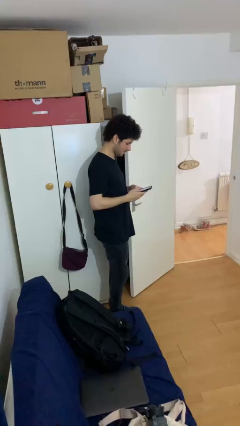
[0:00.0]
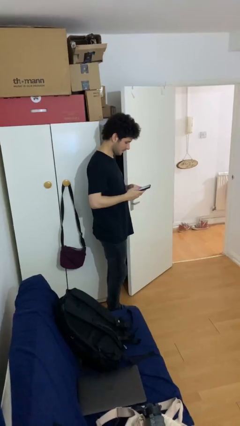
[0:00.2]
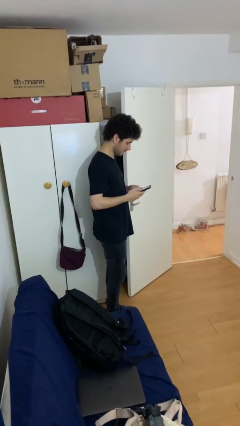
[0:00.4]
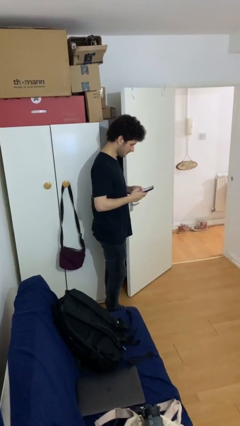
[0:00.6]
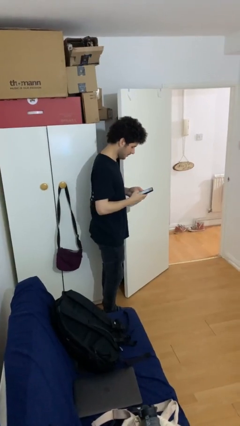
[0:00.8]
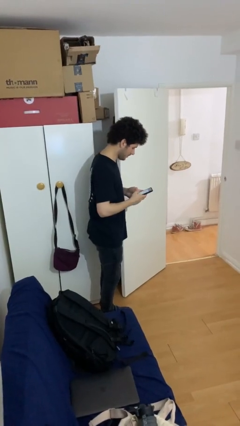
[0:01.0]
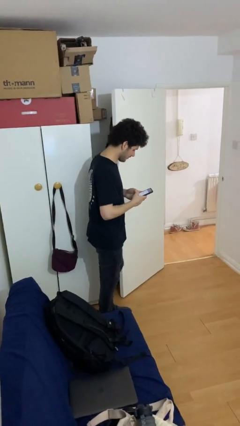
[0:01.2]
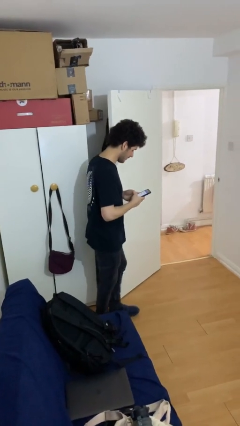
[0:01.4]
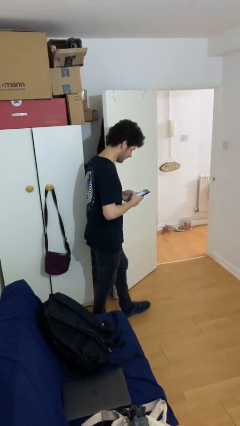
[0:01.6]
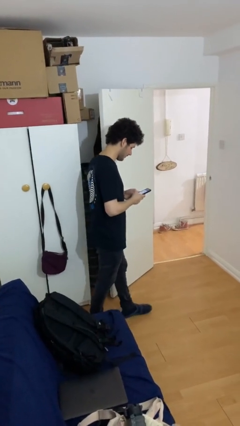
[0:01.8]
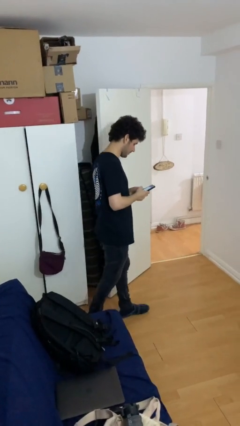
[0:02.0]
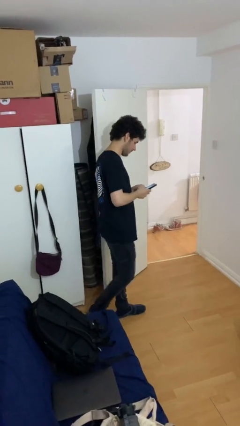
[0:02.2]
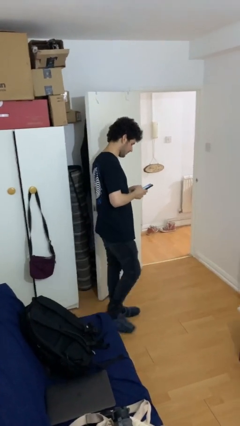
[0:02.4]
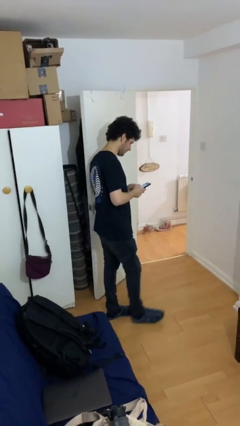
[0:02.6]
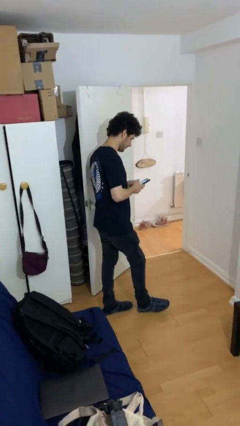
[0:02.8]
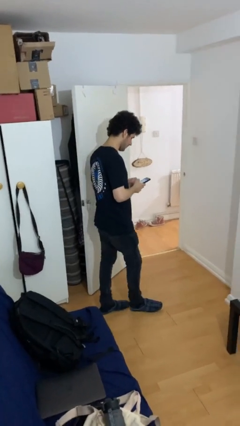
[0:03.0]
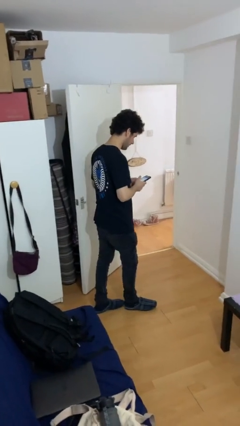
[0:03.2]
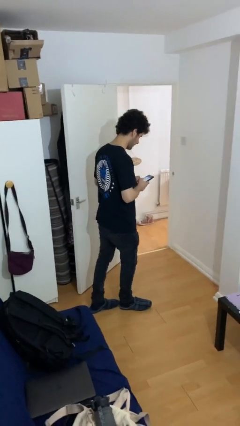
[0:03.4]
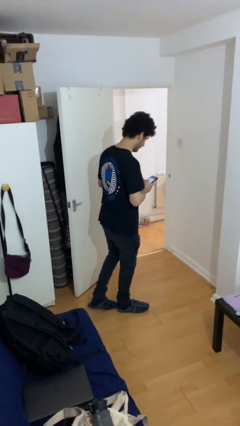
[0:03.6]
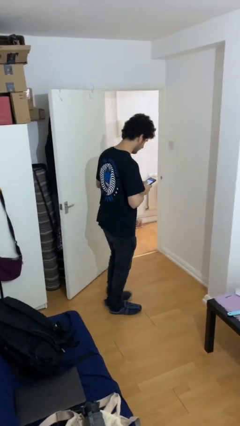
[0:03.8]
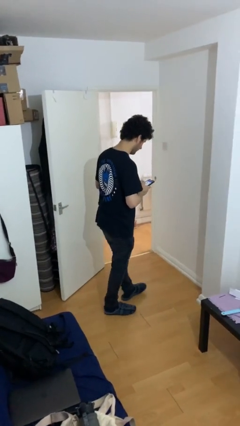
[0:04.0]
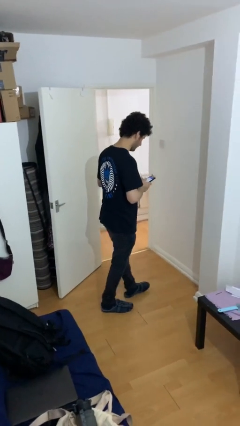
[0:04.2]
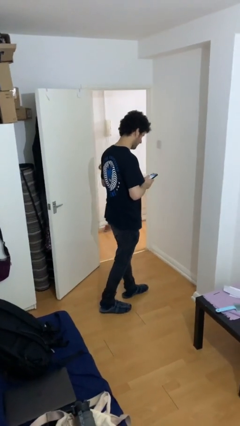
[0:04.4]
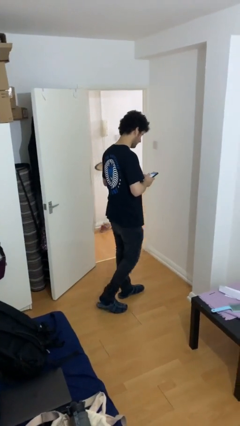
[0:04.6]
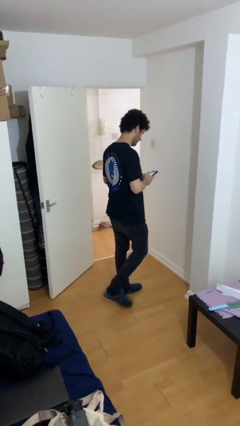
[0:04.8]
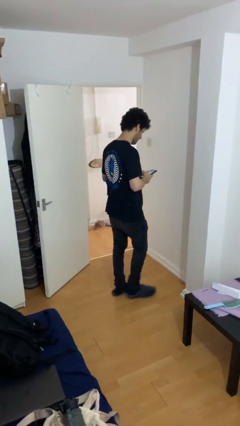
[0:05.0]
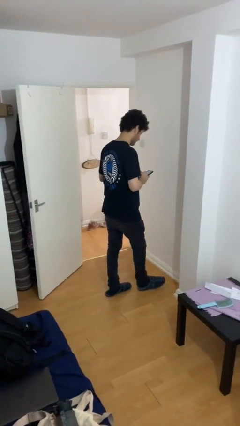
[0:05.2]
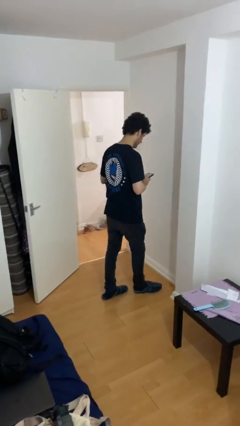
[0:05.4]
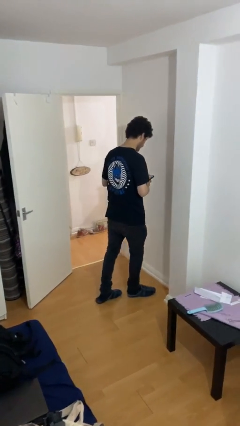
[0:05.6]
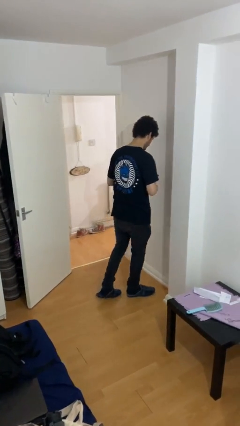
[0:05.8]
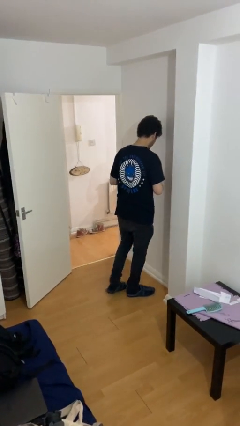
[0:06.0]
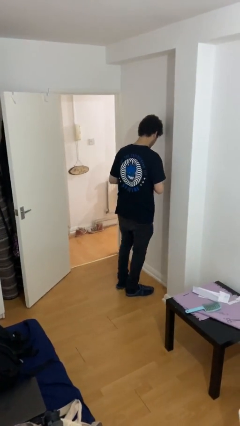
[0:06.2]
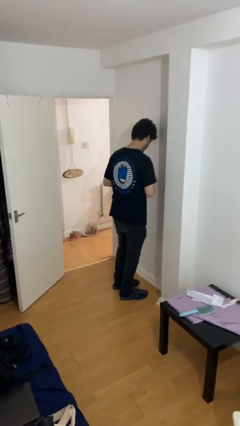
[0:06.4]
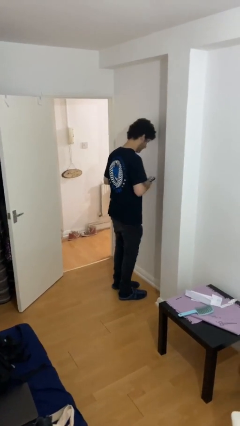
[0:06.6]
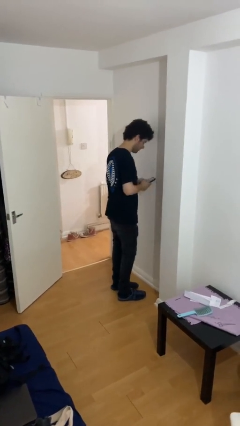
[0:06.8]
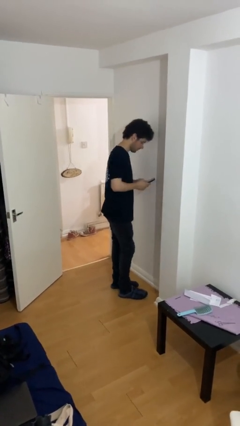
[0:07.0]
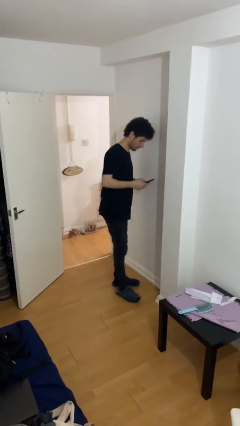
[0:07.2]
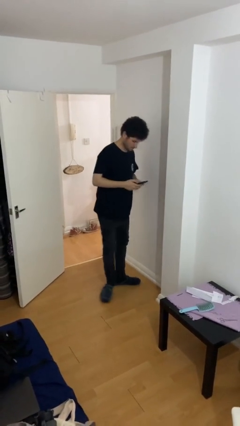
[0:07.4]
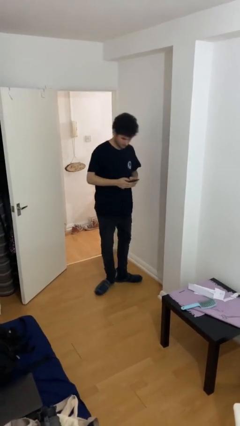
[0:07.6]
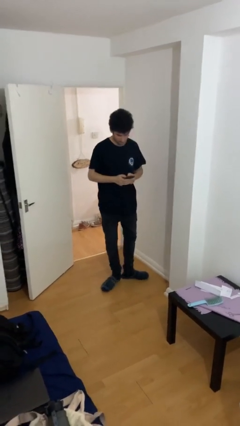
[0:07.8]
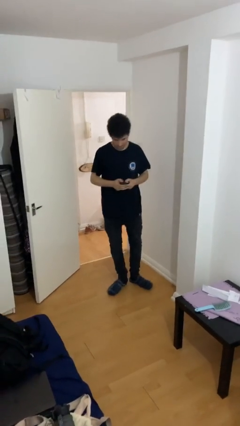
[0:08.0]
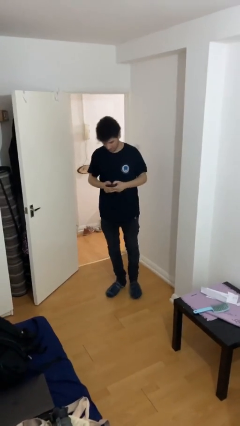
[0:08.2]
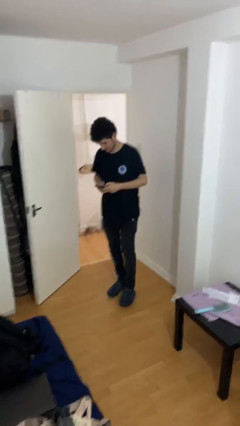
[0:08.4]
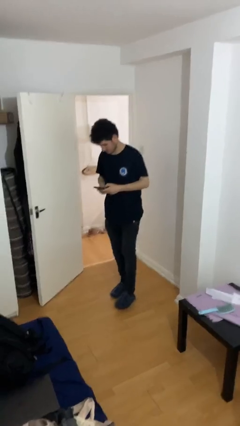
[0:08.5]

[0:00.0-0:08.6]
person texts on phone

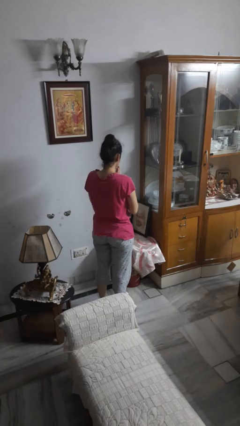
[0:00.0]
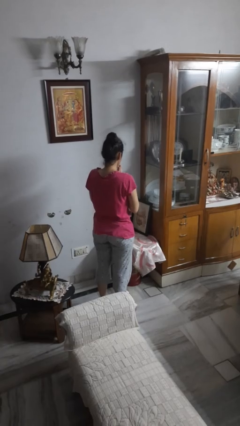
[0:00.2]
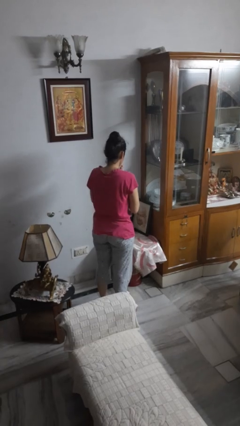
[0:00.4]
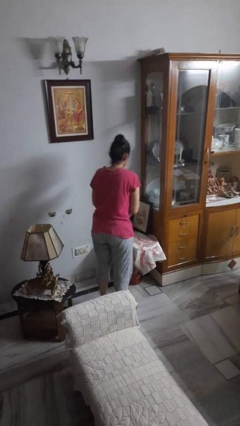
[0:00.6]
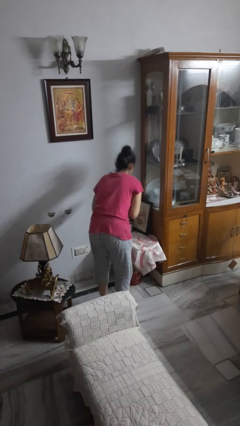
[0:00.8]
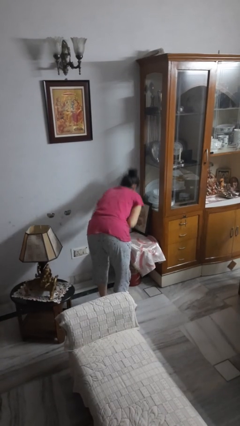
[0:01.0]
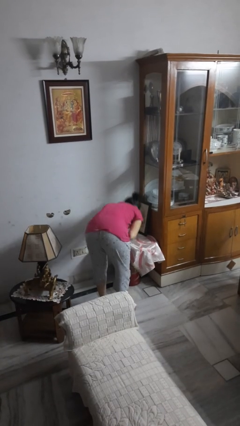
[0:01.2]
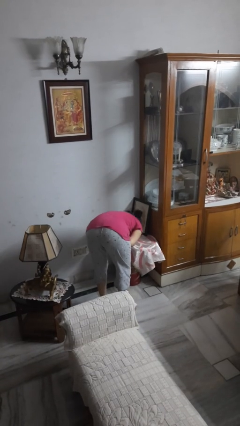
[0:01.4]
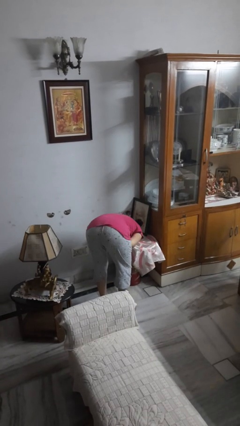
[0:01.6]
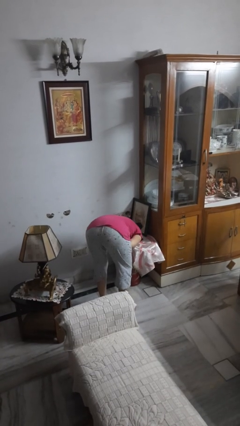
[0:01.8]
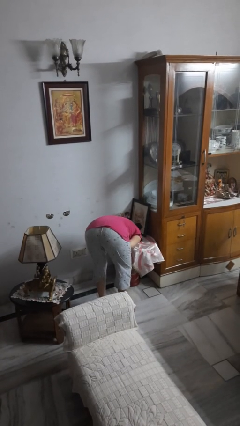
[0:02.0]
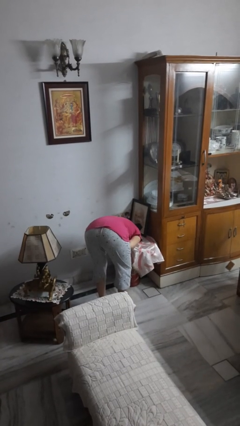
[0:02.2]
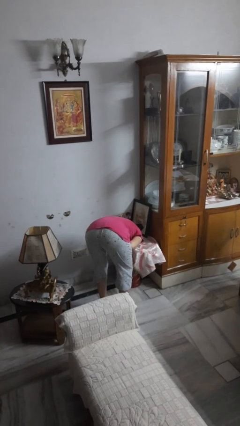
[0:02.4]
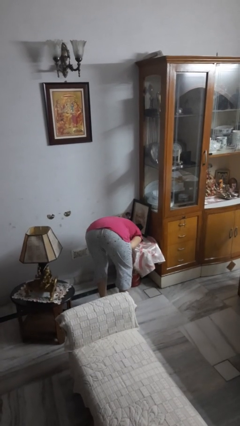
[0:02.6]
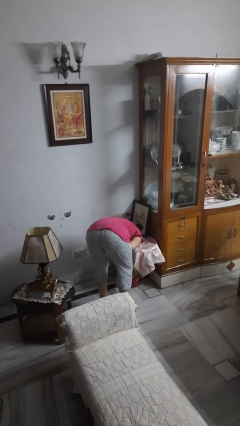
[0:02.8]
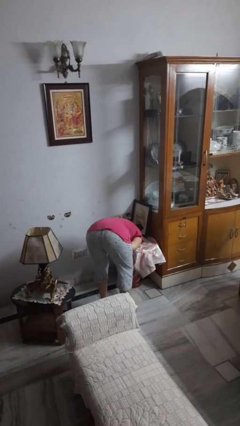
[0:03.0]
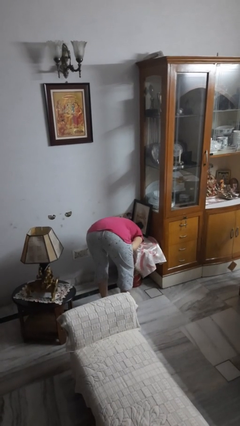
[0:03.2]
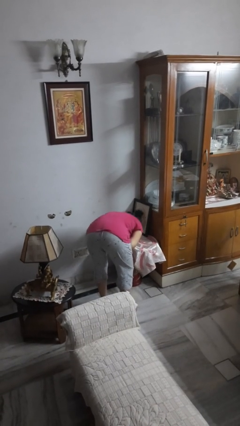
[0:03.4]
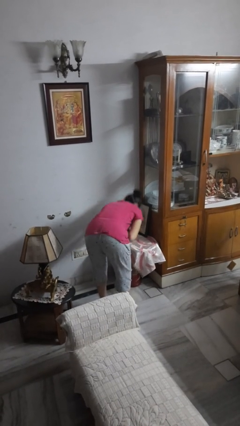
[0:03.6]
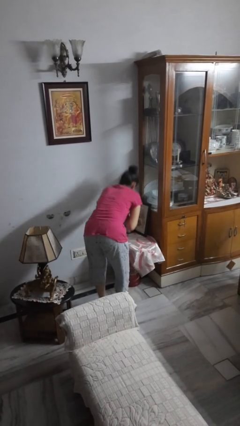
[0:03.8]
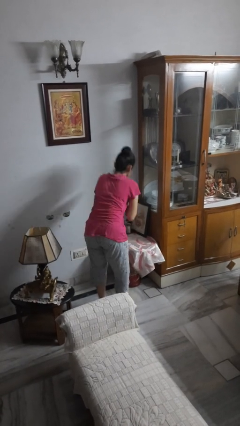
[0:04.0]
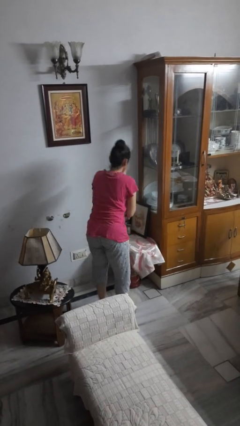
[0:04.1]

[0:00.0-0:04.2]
person prays

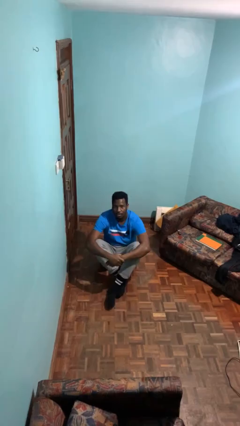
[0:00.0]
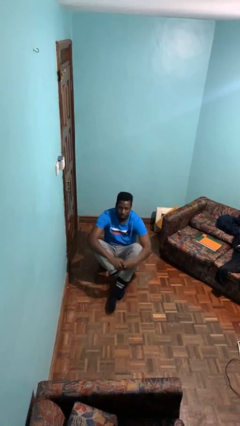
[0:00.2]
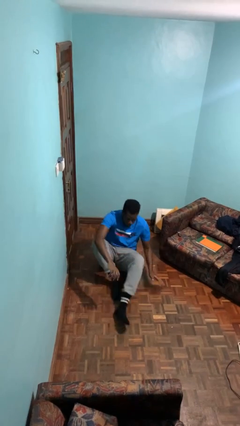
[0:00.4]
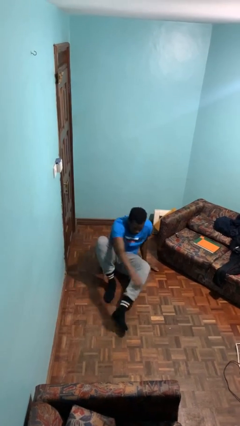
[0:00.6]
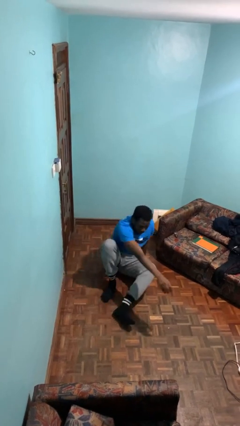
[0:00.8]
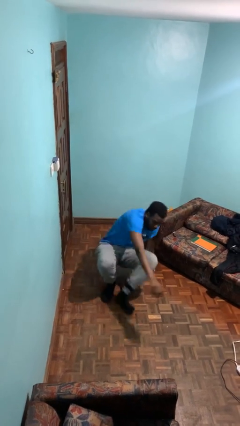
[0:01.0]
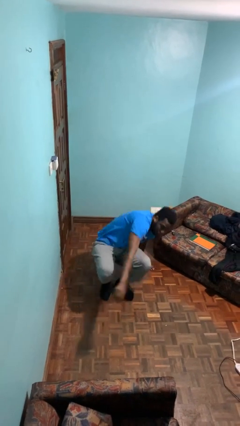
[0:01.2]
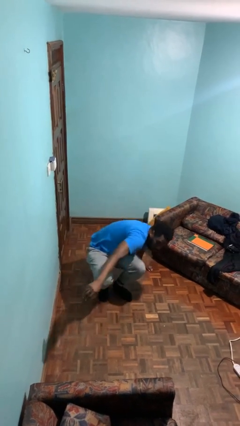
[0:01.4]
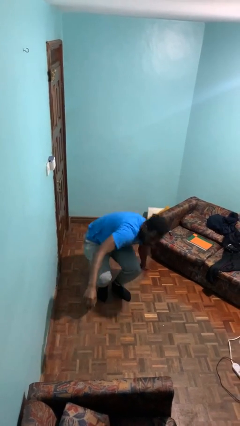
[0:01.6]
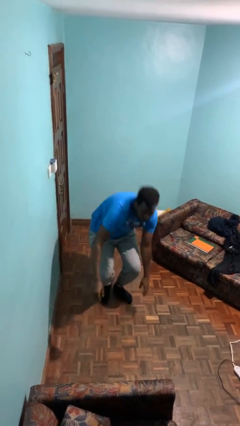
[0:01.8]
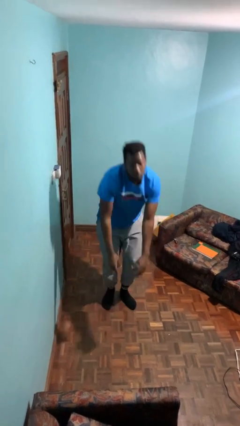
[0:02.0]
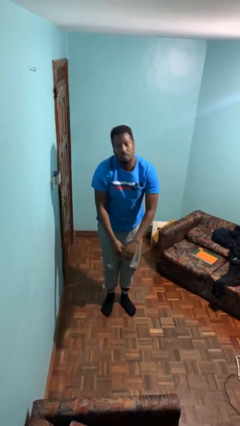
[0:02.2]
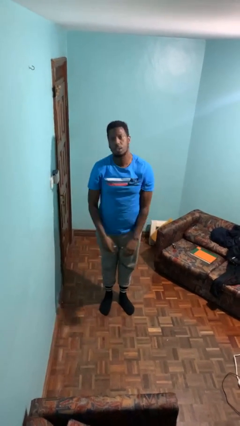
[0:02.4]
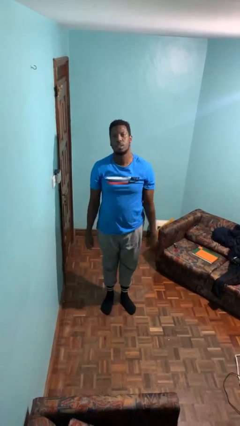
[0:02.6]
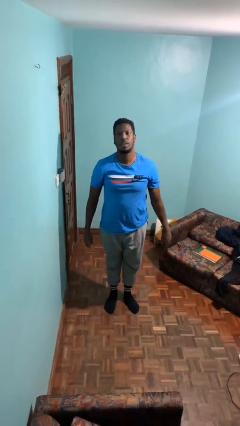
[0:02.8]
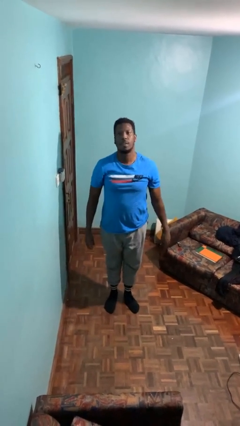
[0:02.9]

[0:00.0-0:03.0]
person stands up from floor

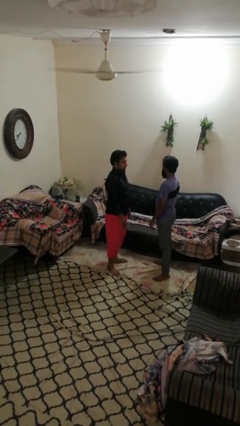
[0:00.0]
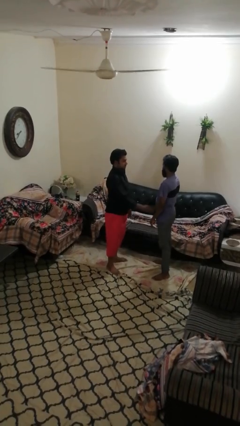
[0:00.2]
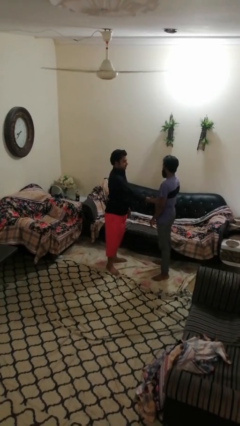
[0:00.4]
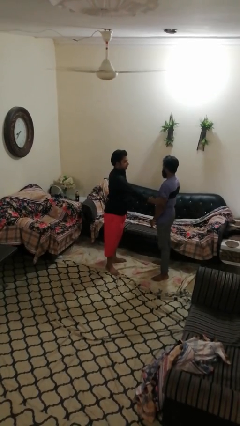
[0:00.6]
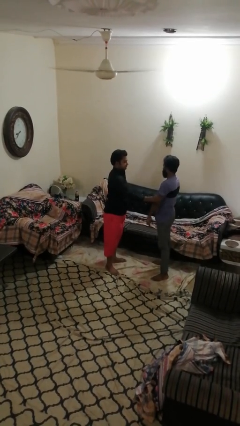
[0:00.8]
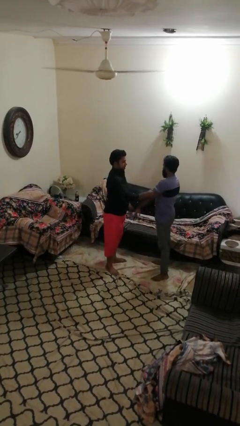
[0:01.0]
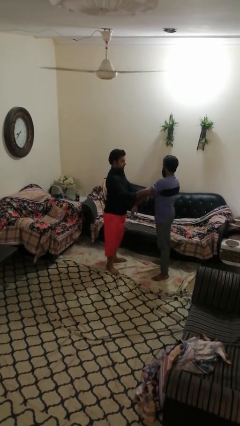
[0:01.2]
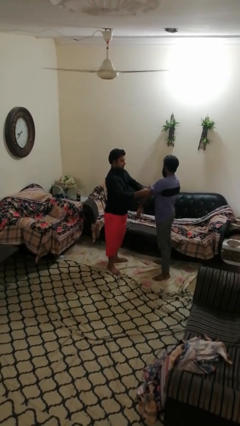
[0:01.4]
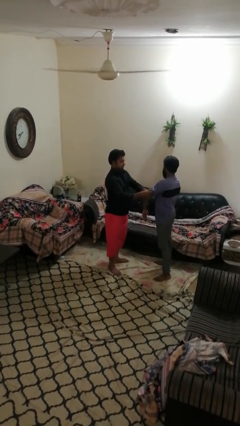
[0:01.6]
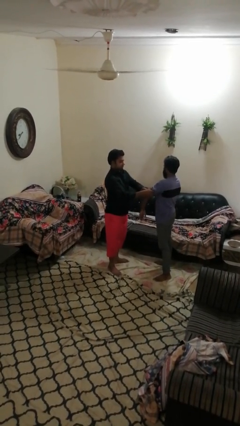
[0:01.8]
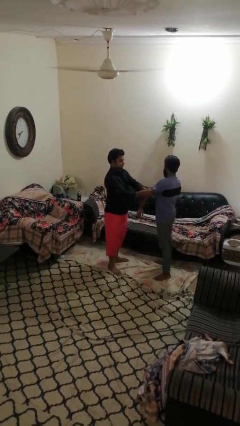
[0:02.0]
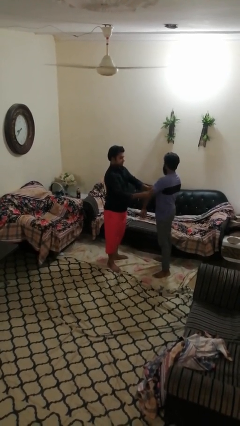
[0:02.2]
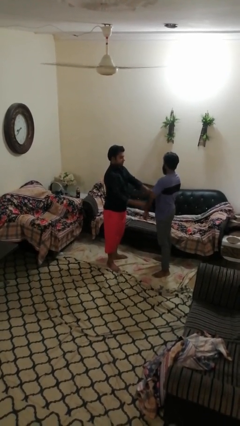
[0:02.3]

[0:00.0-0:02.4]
person grabs person by bicep
